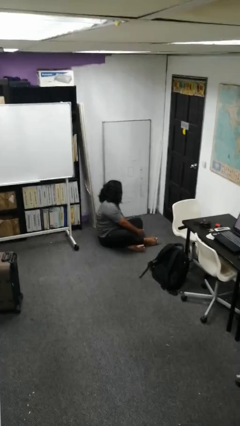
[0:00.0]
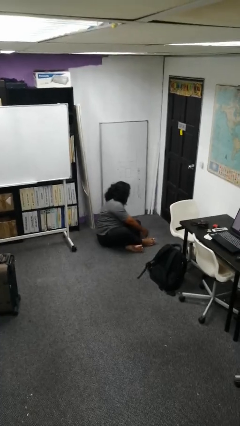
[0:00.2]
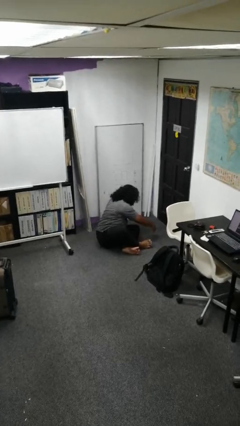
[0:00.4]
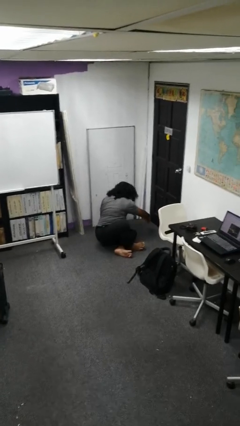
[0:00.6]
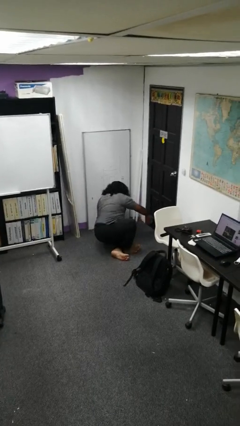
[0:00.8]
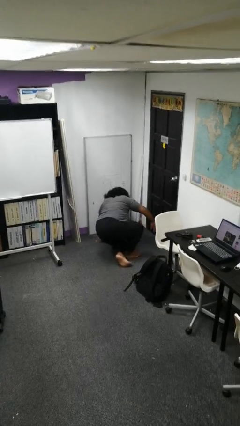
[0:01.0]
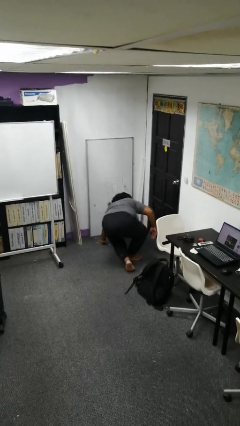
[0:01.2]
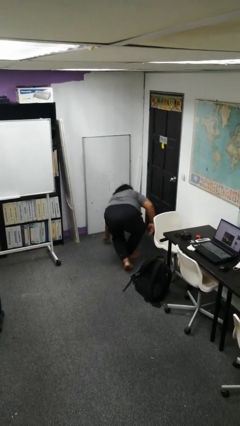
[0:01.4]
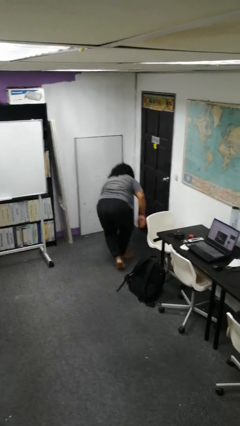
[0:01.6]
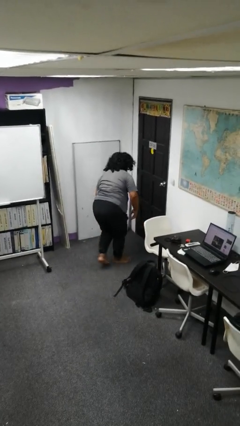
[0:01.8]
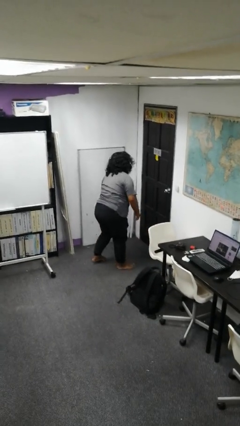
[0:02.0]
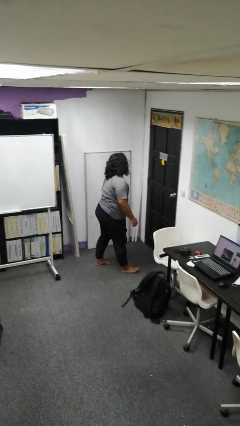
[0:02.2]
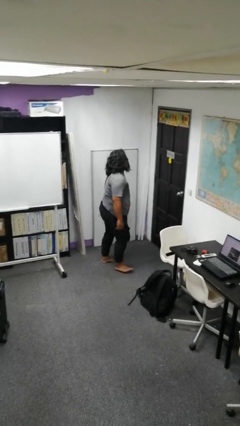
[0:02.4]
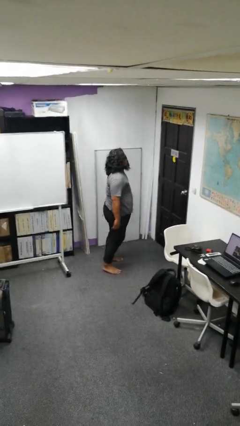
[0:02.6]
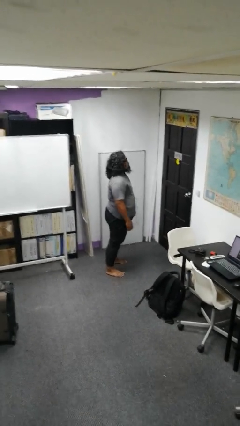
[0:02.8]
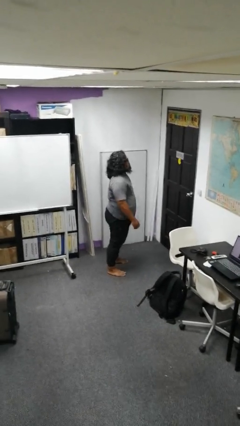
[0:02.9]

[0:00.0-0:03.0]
person stands up from floor

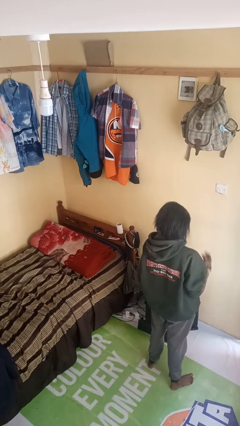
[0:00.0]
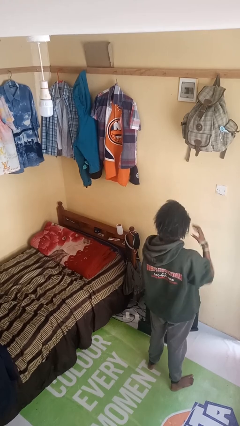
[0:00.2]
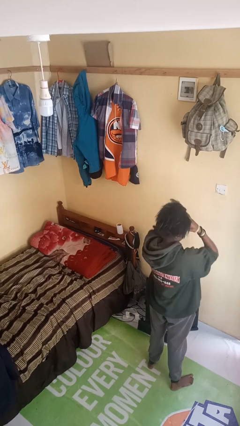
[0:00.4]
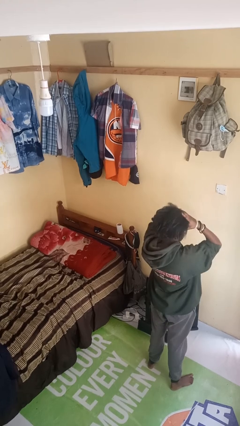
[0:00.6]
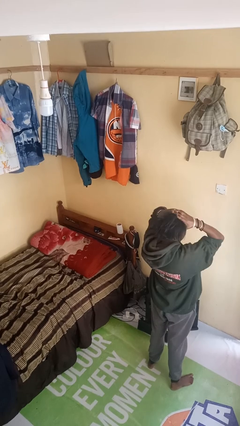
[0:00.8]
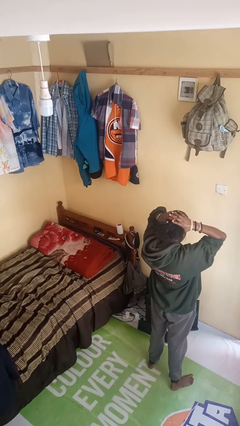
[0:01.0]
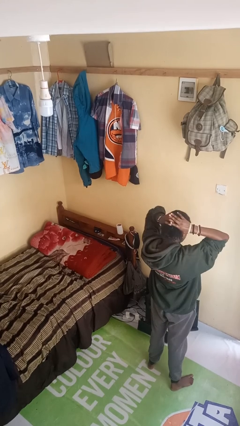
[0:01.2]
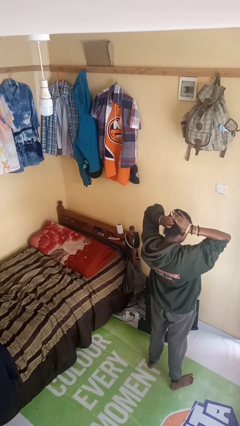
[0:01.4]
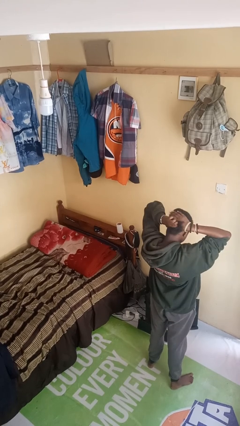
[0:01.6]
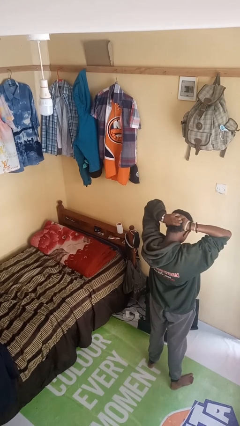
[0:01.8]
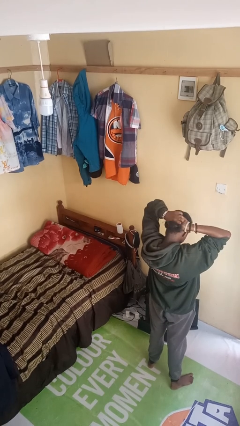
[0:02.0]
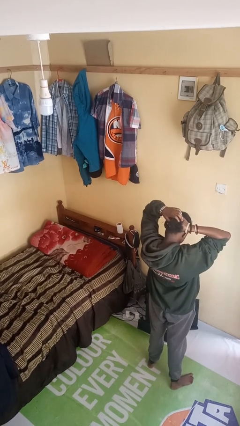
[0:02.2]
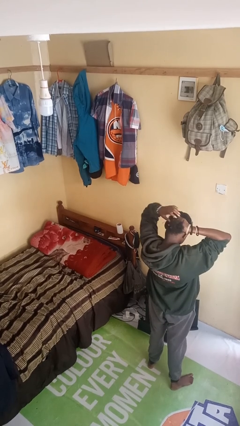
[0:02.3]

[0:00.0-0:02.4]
person strokes hair

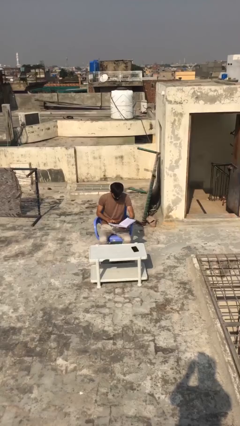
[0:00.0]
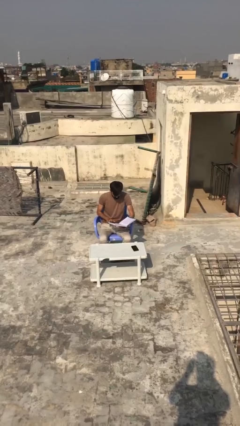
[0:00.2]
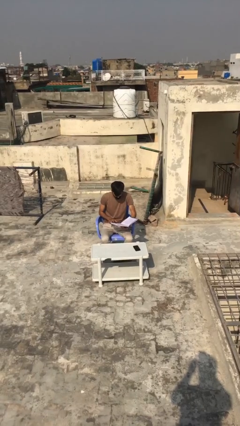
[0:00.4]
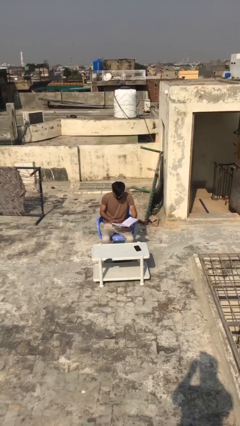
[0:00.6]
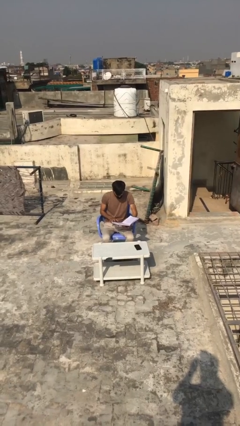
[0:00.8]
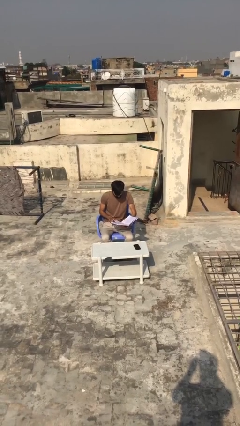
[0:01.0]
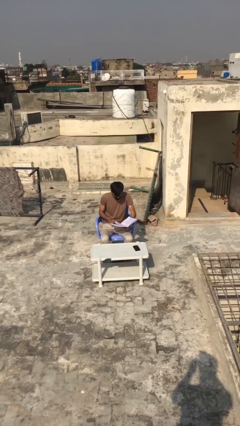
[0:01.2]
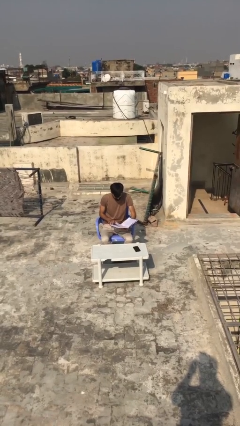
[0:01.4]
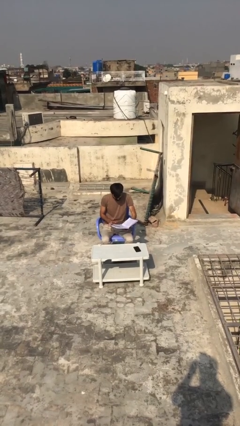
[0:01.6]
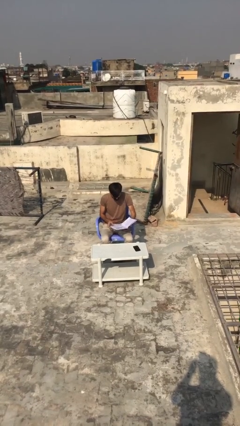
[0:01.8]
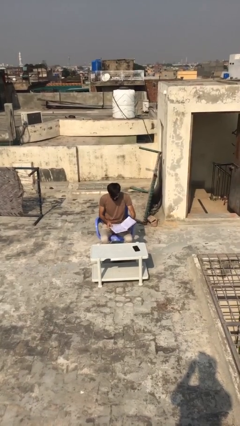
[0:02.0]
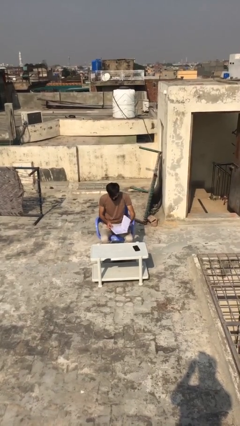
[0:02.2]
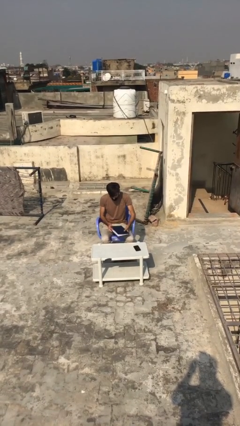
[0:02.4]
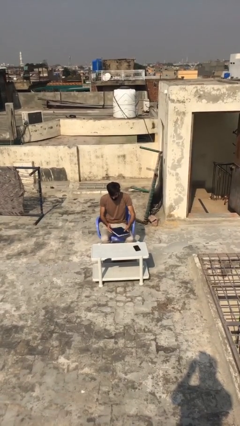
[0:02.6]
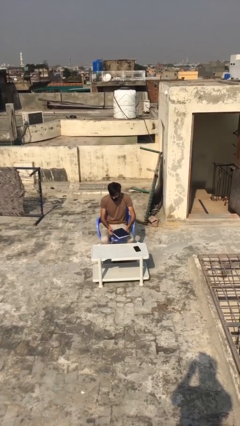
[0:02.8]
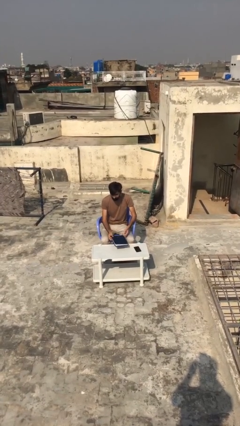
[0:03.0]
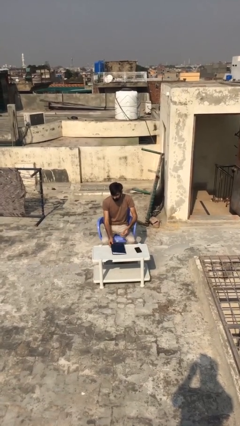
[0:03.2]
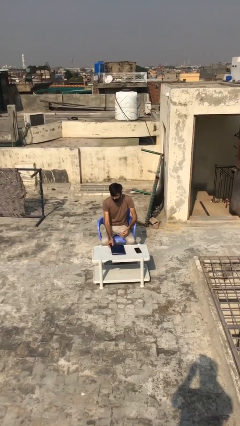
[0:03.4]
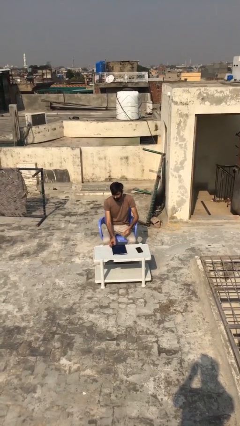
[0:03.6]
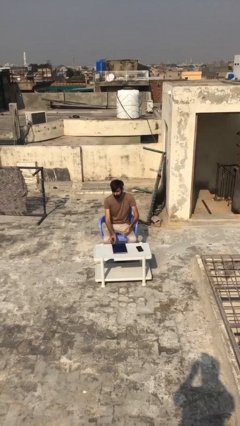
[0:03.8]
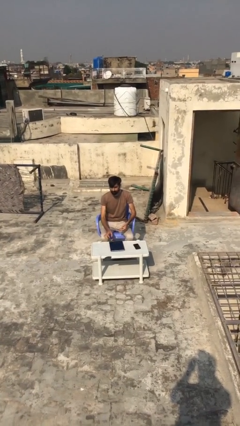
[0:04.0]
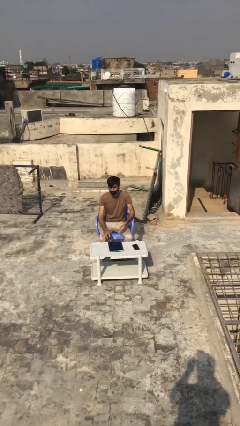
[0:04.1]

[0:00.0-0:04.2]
person puts down object on table

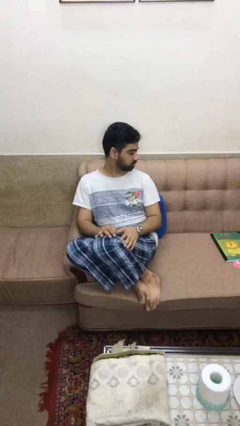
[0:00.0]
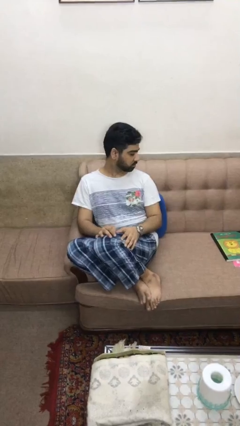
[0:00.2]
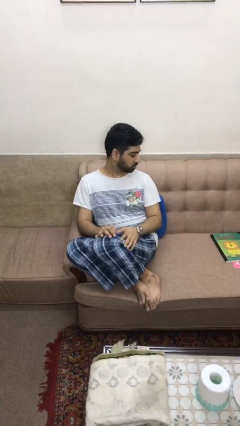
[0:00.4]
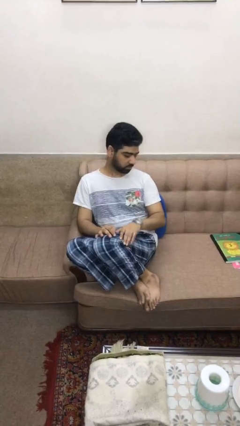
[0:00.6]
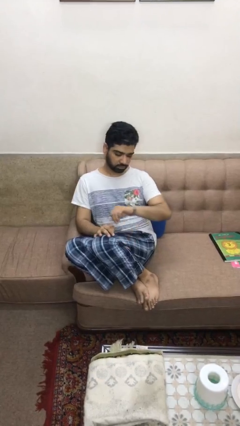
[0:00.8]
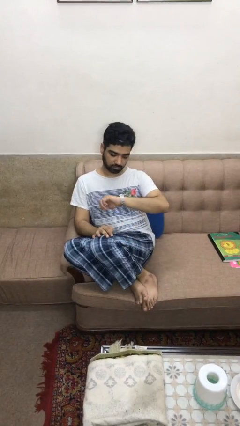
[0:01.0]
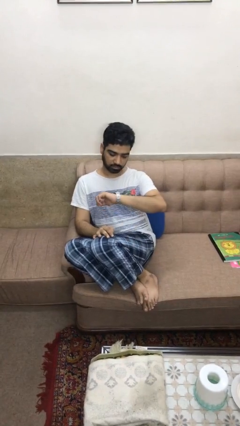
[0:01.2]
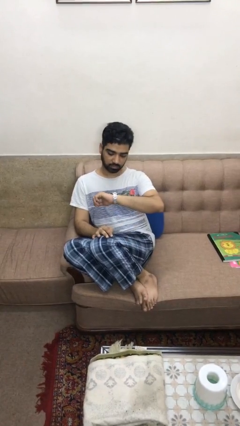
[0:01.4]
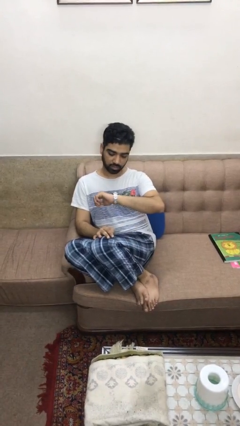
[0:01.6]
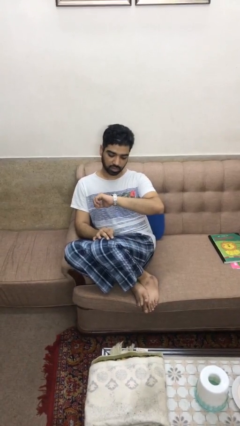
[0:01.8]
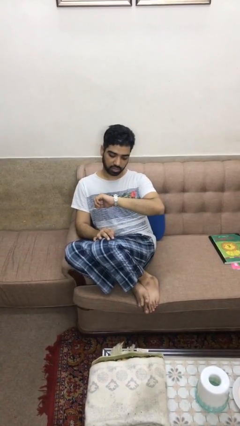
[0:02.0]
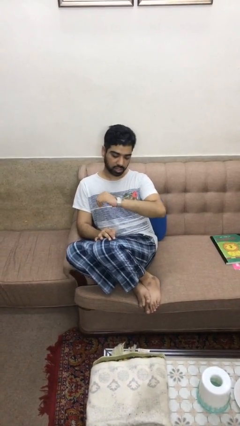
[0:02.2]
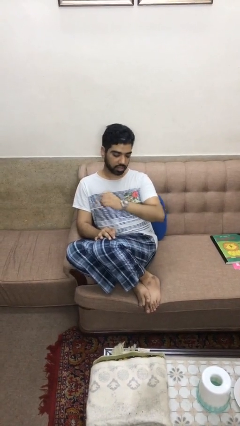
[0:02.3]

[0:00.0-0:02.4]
person looks at wristwatch

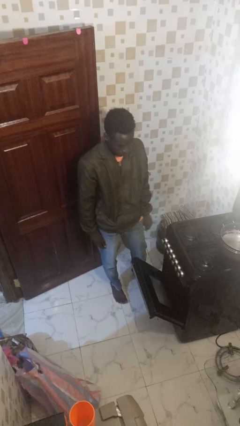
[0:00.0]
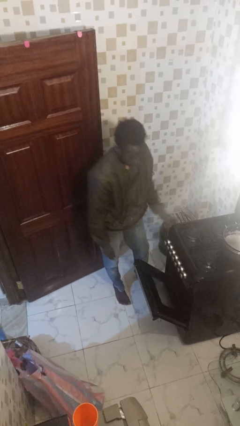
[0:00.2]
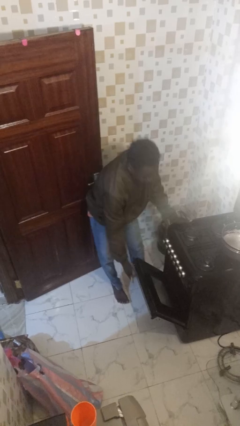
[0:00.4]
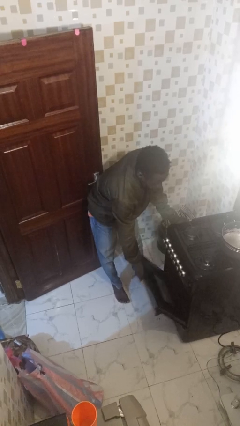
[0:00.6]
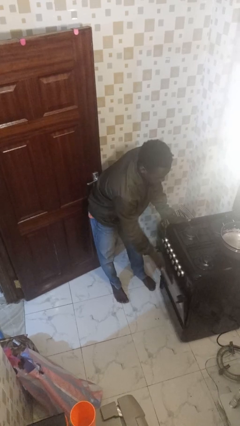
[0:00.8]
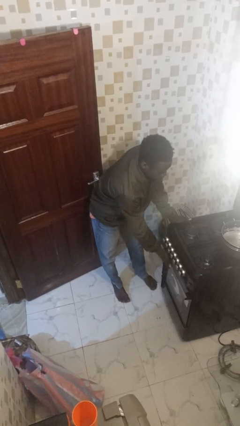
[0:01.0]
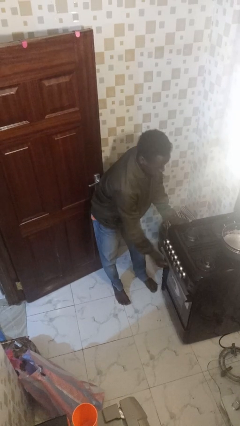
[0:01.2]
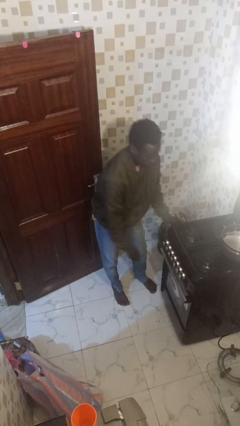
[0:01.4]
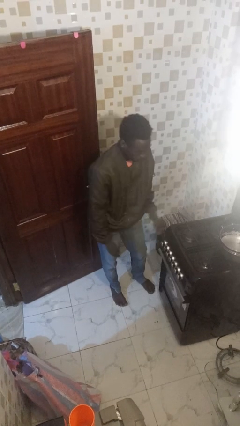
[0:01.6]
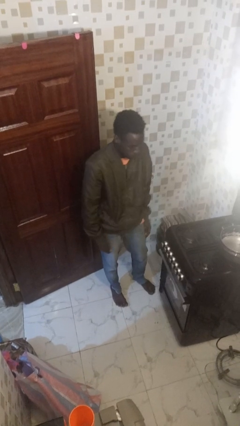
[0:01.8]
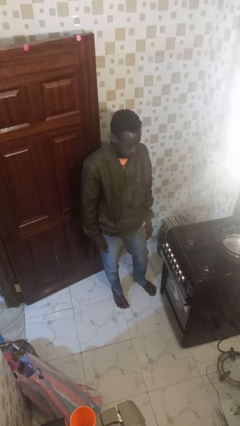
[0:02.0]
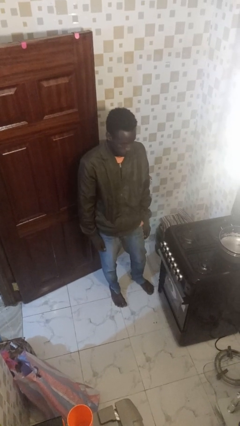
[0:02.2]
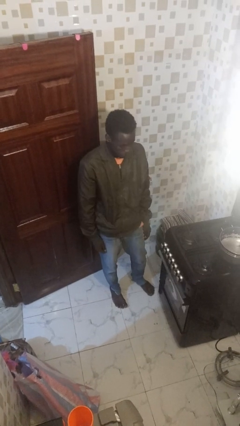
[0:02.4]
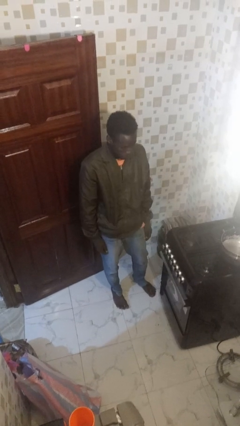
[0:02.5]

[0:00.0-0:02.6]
person closes oven door

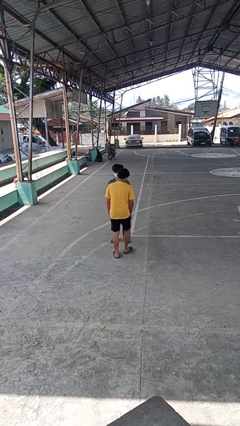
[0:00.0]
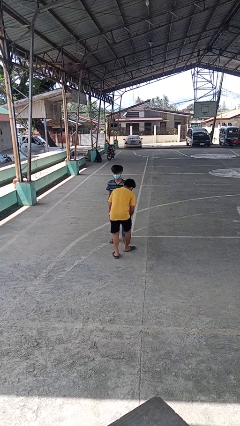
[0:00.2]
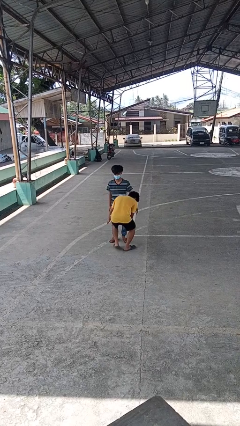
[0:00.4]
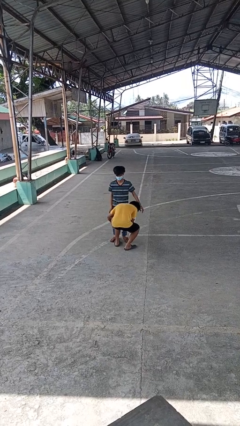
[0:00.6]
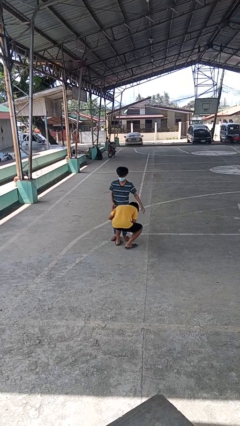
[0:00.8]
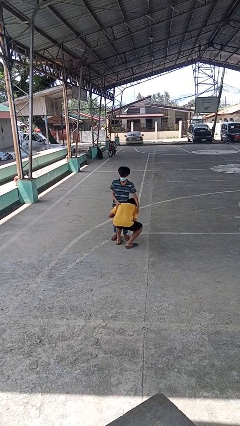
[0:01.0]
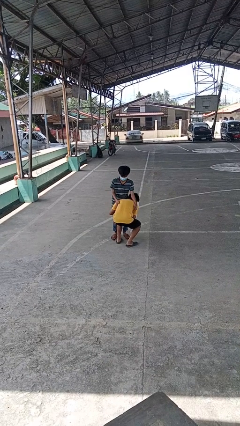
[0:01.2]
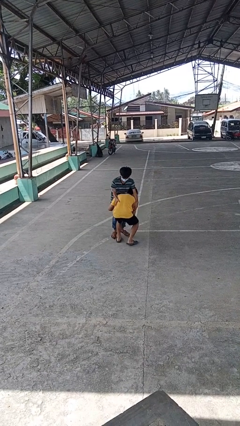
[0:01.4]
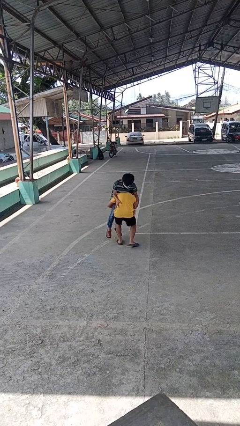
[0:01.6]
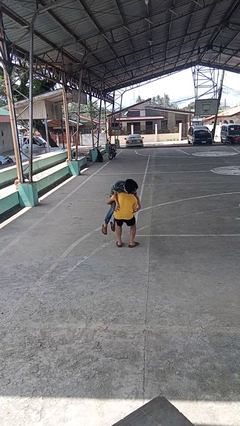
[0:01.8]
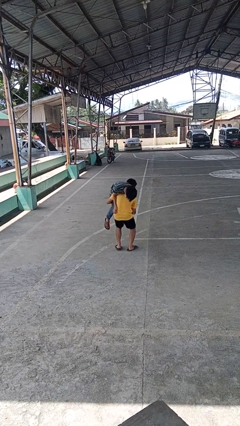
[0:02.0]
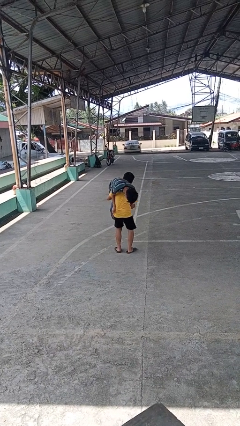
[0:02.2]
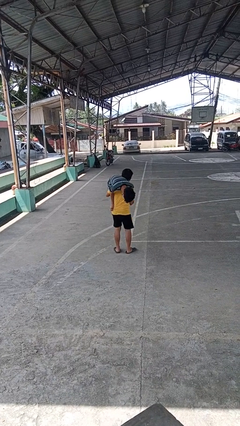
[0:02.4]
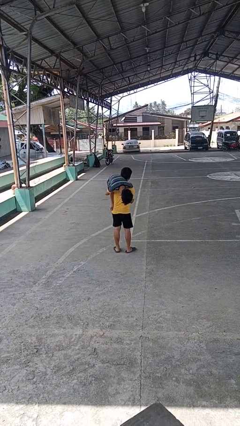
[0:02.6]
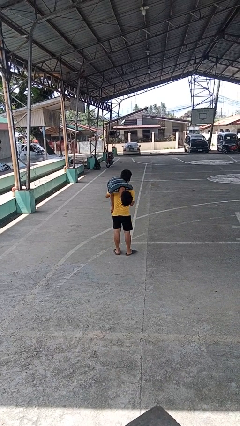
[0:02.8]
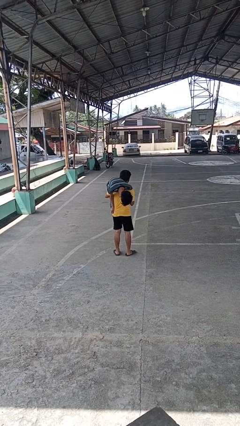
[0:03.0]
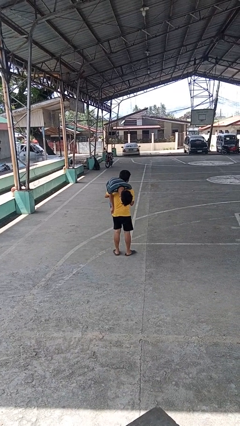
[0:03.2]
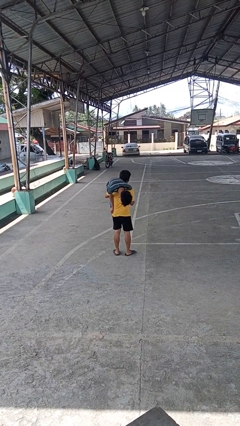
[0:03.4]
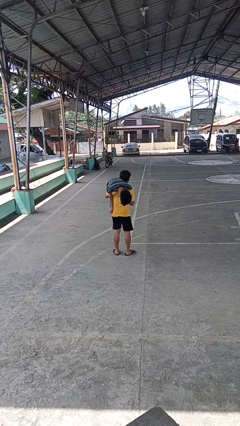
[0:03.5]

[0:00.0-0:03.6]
person carries person over shoulder
